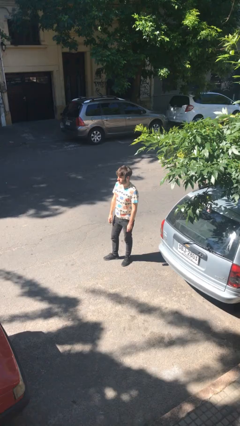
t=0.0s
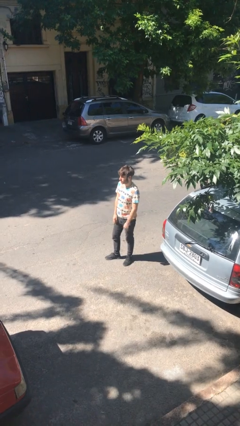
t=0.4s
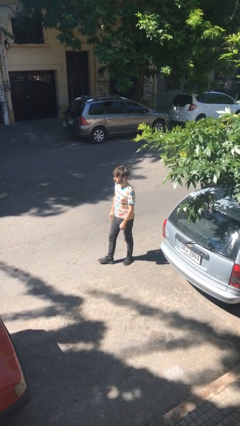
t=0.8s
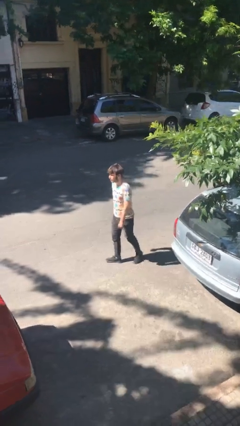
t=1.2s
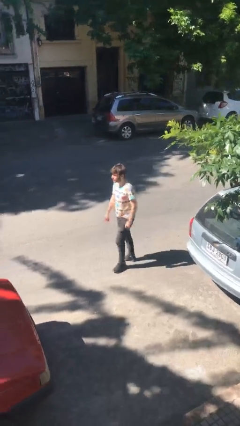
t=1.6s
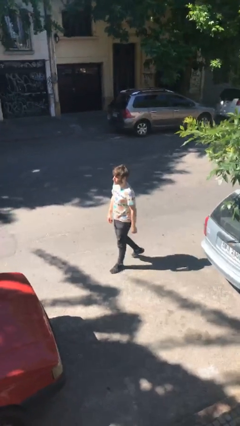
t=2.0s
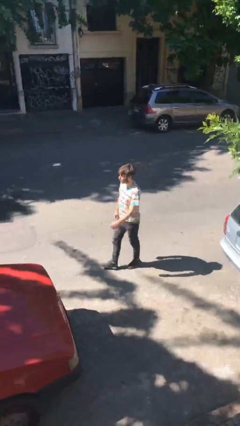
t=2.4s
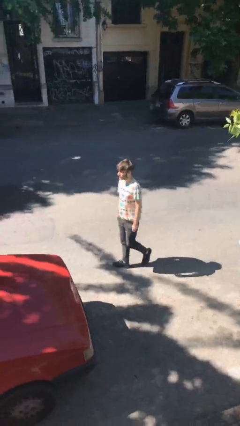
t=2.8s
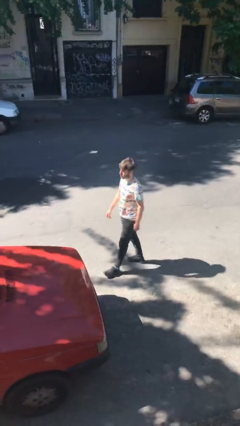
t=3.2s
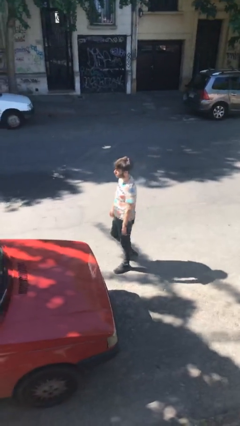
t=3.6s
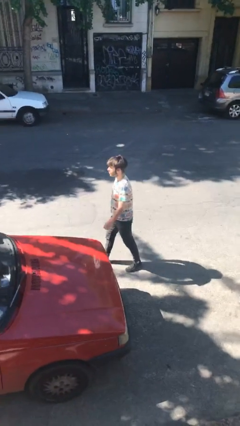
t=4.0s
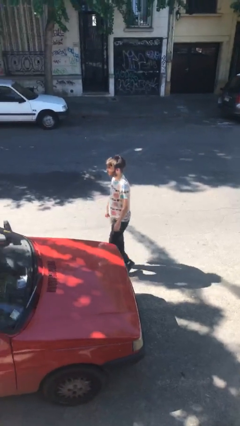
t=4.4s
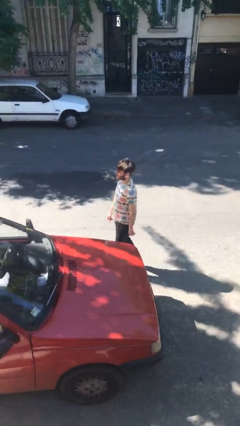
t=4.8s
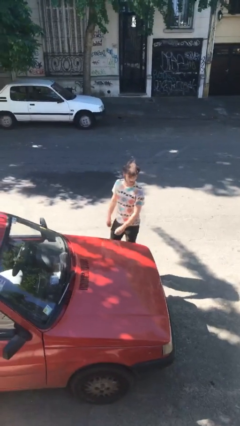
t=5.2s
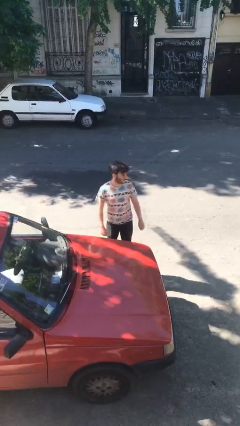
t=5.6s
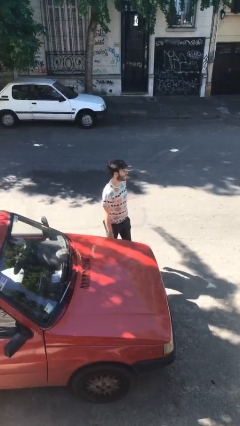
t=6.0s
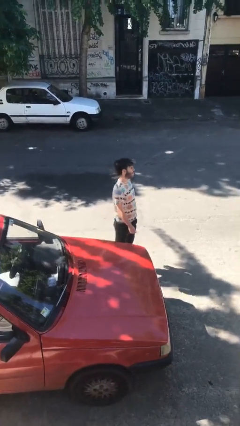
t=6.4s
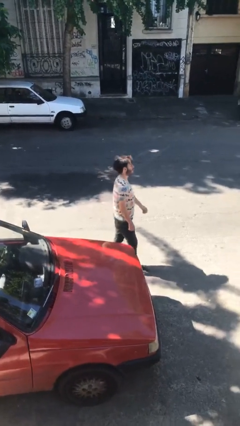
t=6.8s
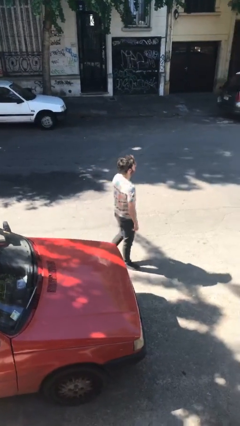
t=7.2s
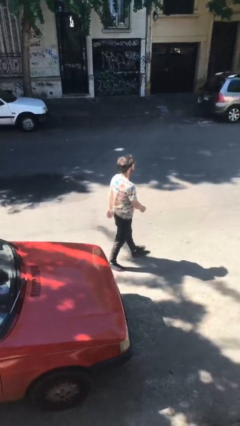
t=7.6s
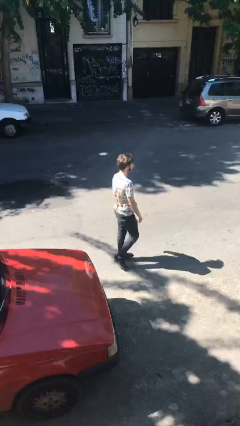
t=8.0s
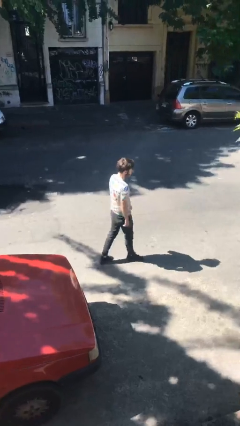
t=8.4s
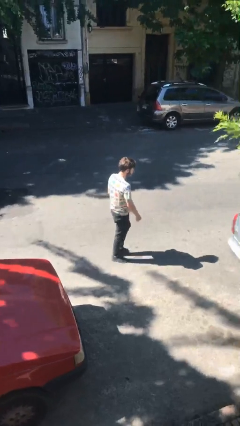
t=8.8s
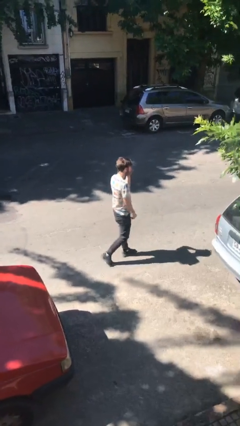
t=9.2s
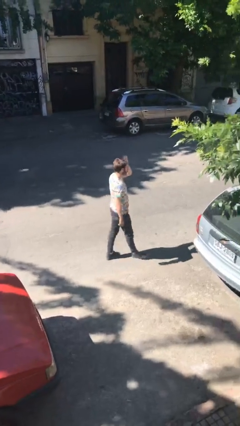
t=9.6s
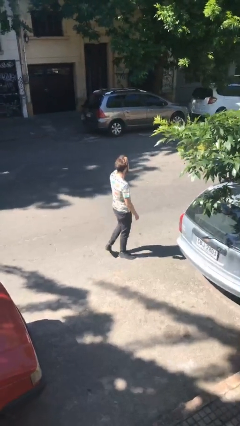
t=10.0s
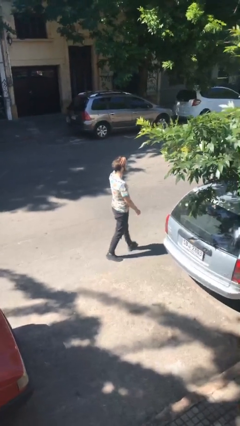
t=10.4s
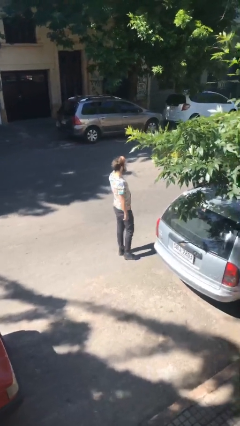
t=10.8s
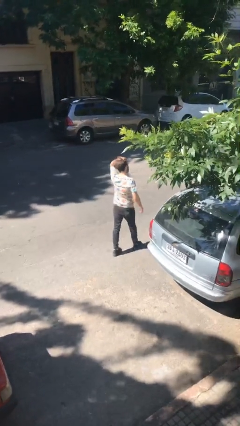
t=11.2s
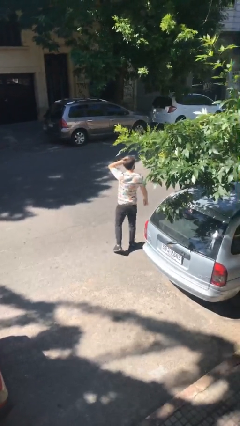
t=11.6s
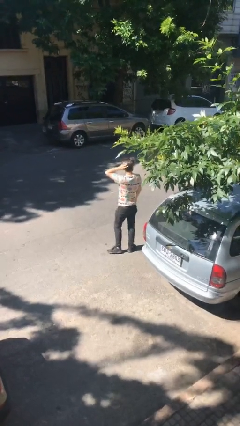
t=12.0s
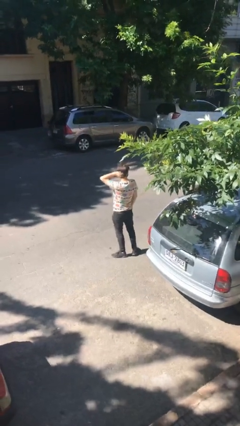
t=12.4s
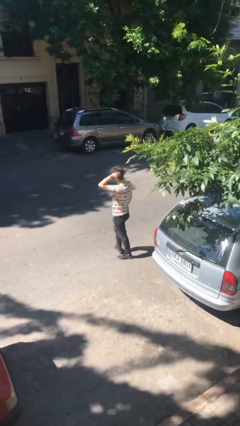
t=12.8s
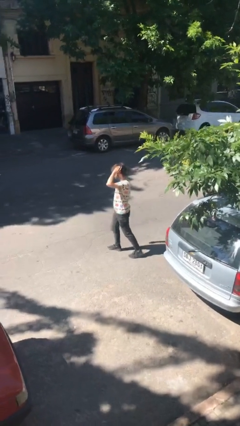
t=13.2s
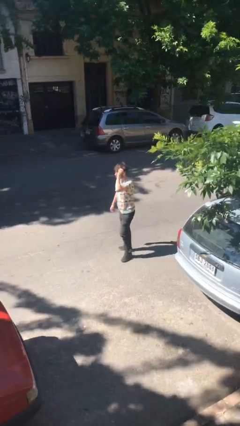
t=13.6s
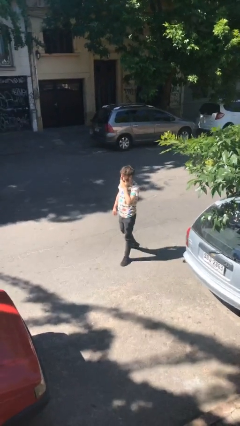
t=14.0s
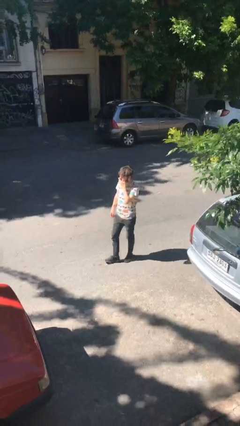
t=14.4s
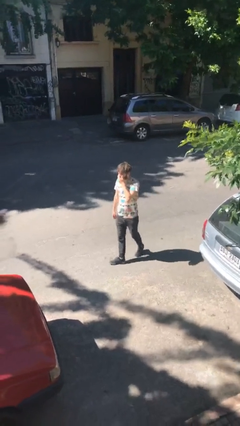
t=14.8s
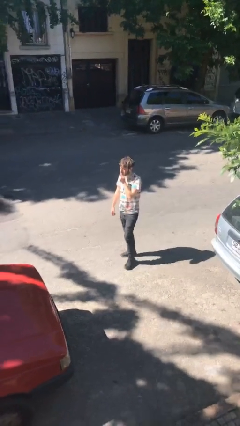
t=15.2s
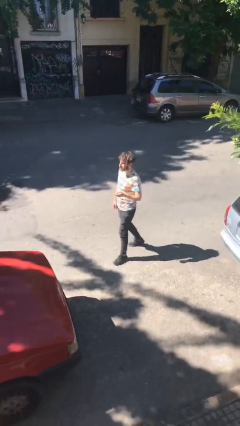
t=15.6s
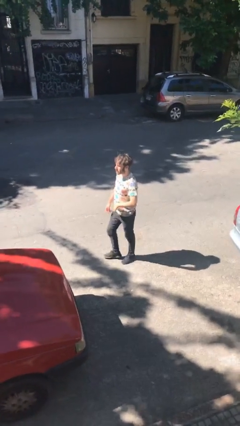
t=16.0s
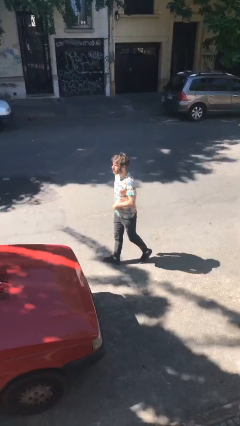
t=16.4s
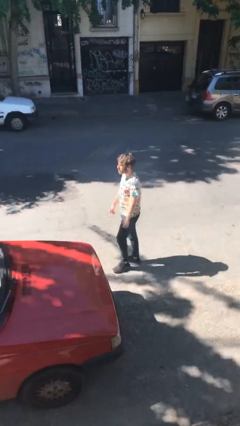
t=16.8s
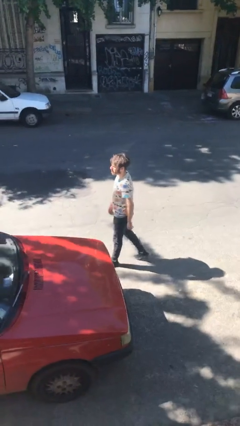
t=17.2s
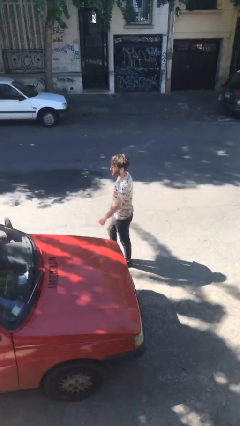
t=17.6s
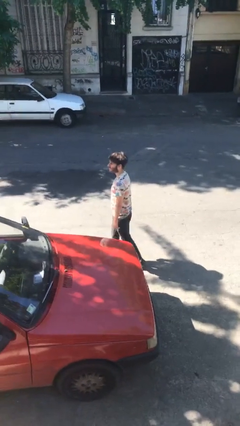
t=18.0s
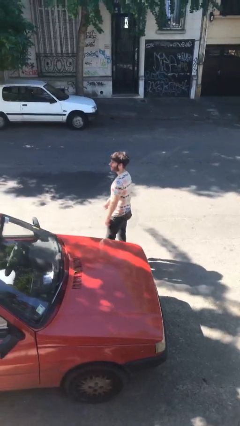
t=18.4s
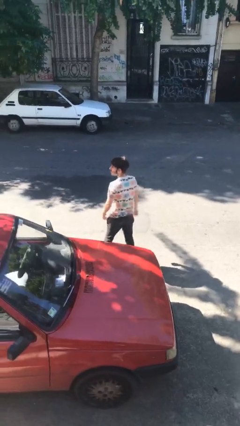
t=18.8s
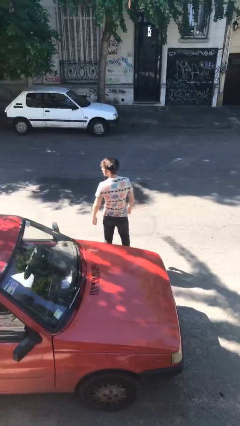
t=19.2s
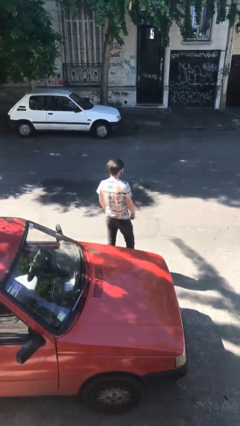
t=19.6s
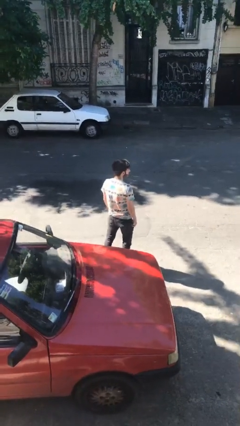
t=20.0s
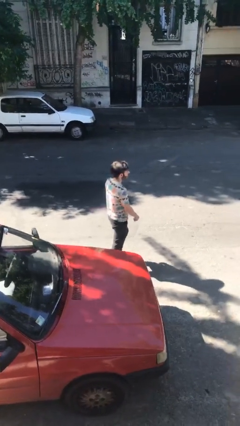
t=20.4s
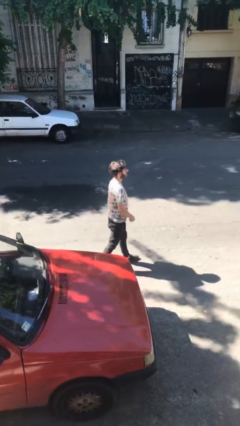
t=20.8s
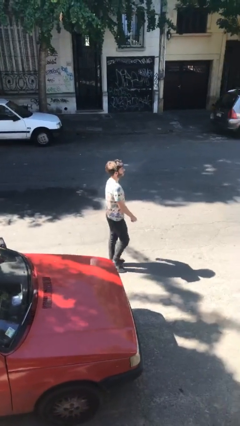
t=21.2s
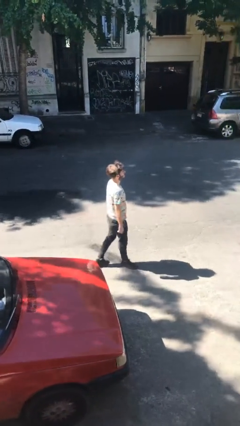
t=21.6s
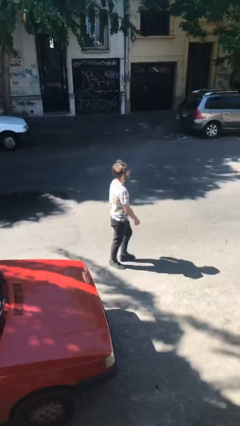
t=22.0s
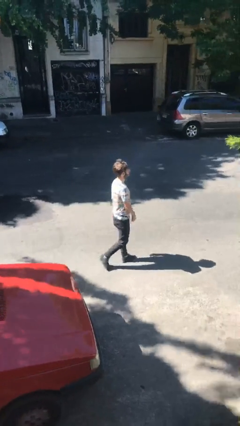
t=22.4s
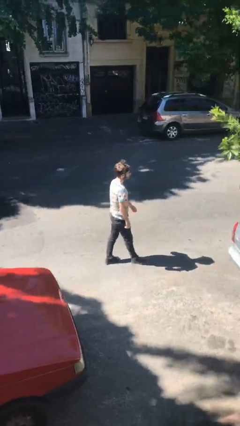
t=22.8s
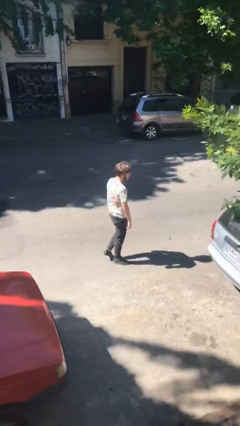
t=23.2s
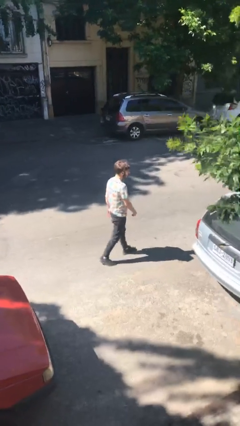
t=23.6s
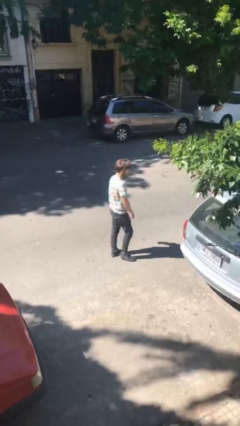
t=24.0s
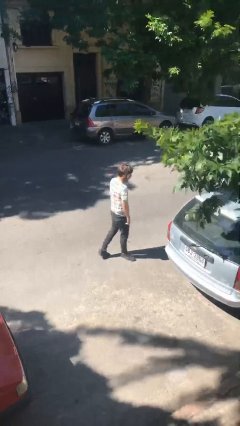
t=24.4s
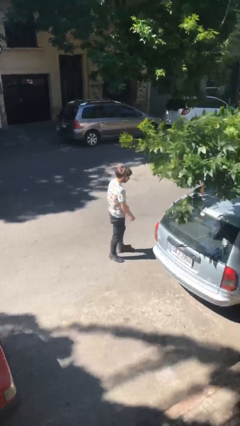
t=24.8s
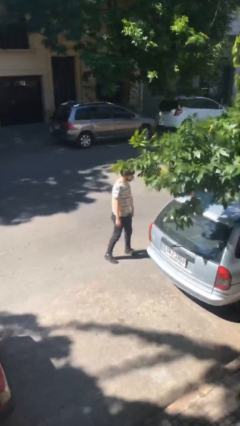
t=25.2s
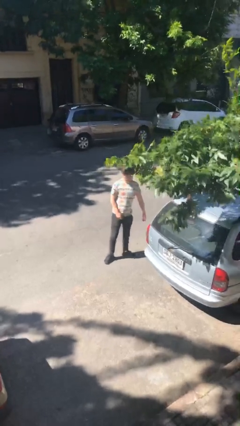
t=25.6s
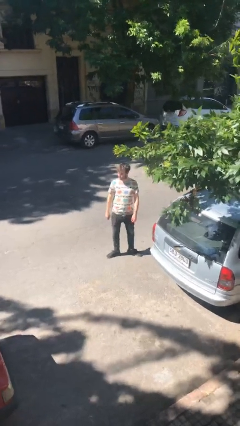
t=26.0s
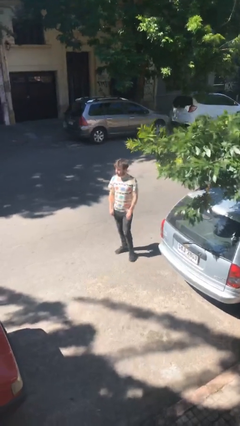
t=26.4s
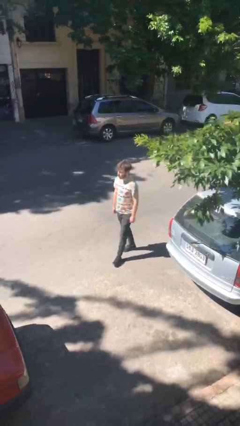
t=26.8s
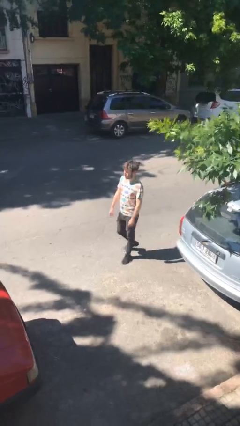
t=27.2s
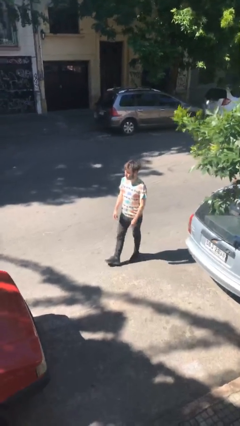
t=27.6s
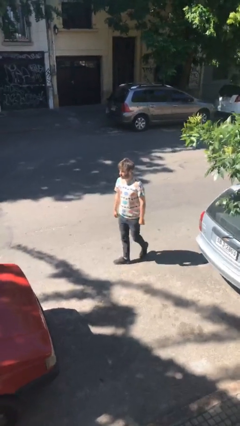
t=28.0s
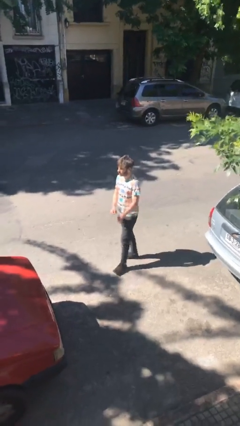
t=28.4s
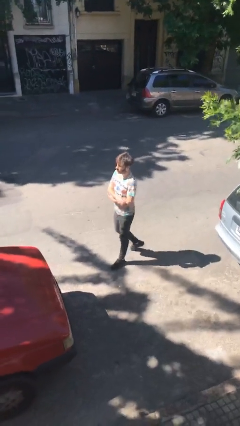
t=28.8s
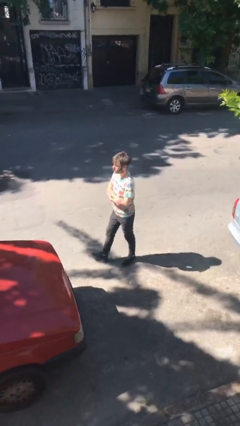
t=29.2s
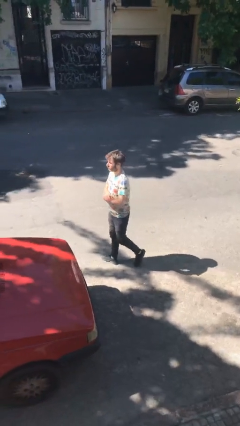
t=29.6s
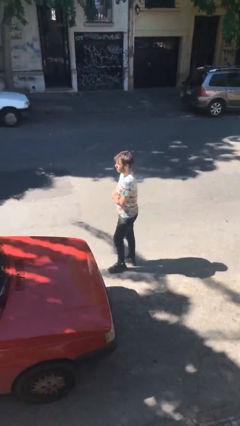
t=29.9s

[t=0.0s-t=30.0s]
person walks

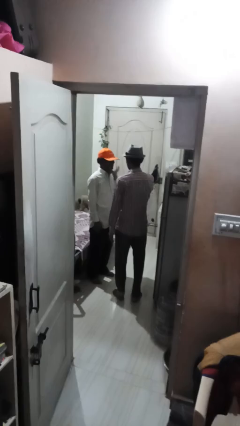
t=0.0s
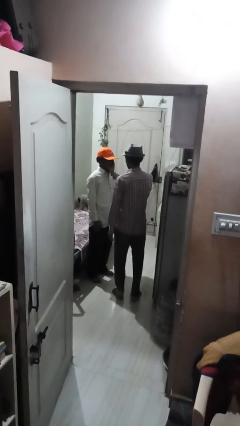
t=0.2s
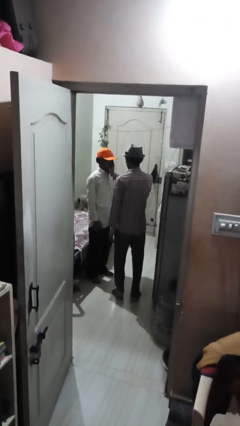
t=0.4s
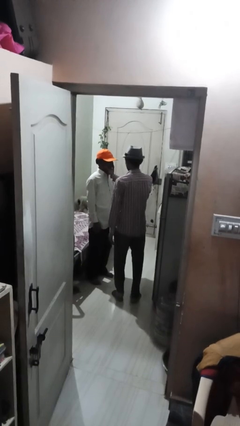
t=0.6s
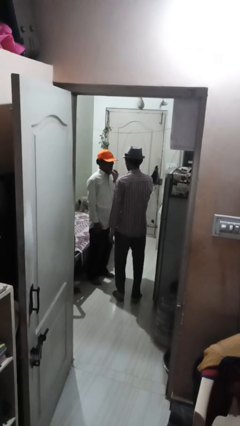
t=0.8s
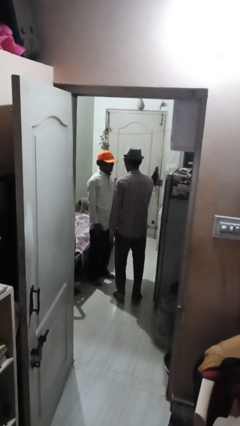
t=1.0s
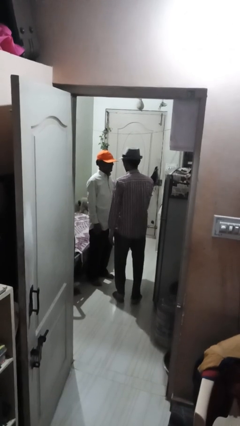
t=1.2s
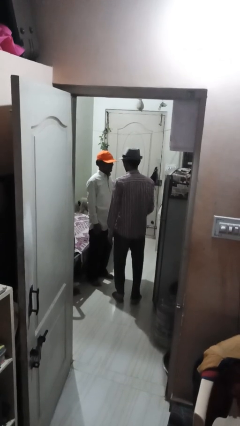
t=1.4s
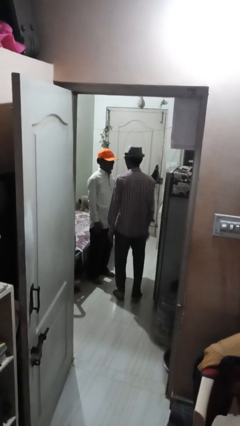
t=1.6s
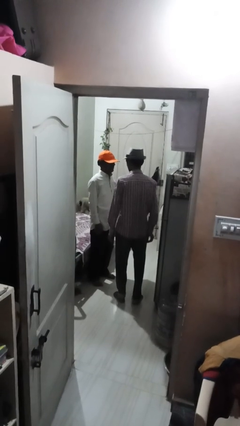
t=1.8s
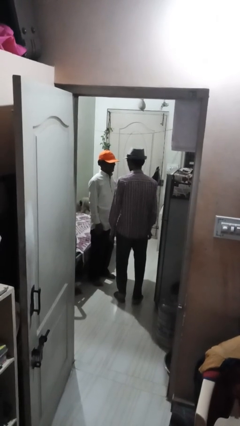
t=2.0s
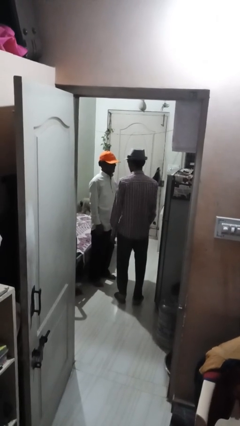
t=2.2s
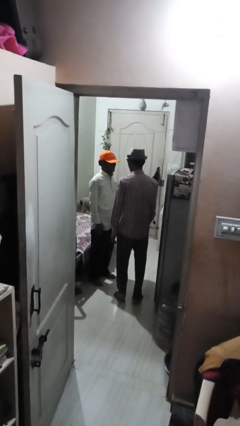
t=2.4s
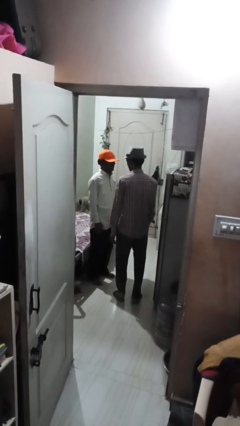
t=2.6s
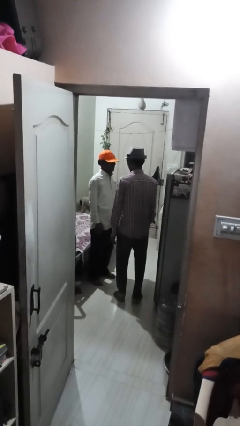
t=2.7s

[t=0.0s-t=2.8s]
person touches face of person

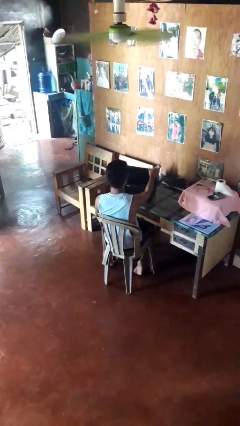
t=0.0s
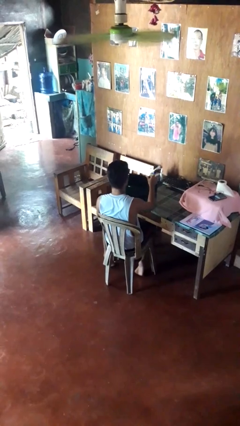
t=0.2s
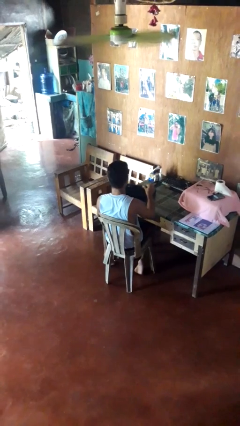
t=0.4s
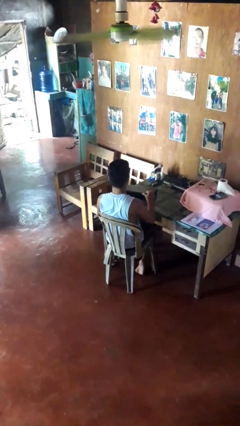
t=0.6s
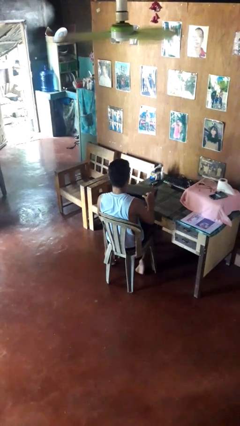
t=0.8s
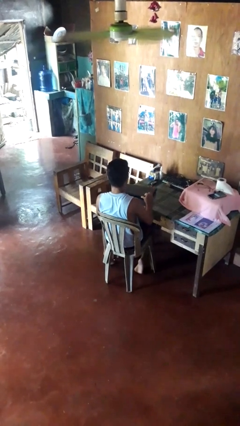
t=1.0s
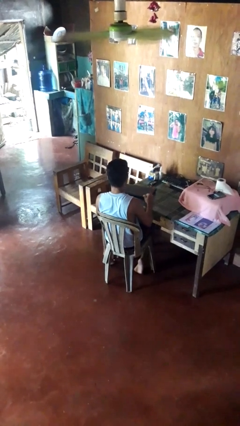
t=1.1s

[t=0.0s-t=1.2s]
person closes laptop
